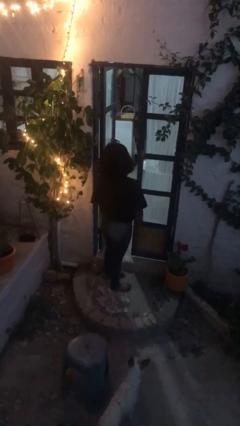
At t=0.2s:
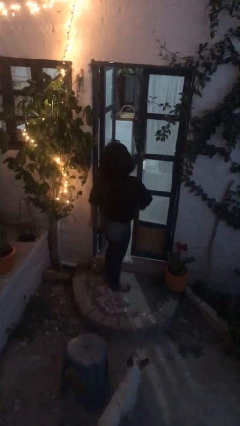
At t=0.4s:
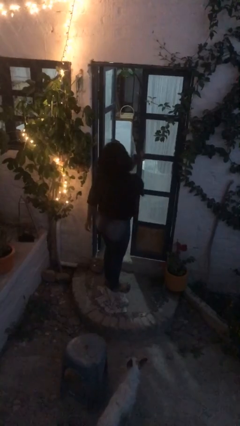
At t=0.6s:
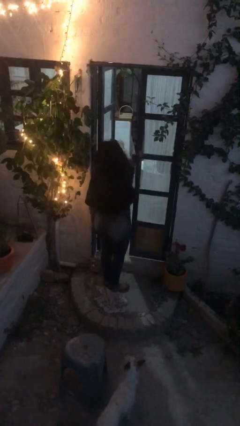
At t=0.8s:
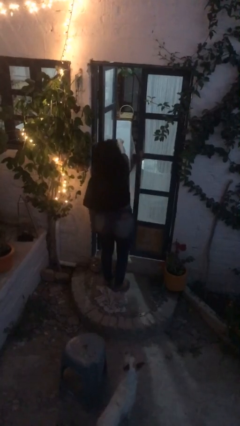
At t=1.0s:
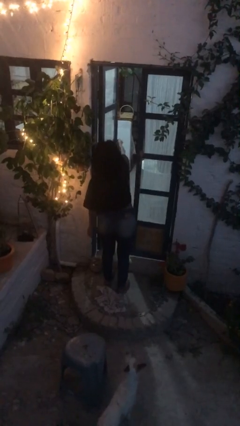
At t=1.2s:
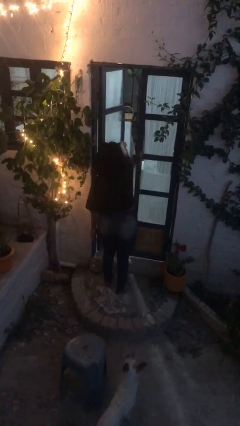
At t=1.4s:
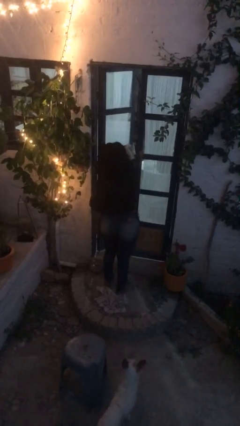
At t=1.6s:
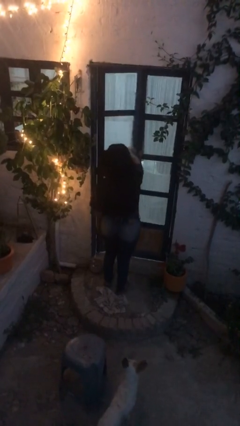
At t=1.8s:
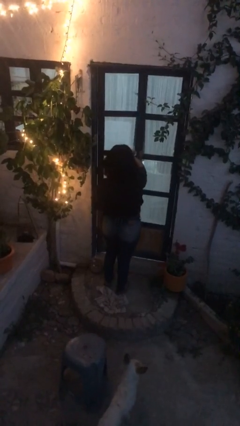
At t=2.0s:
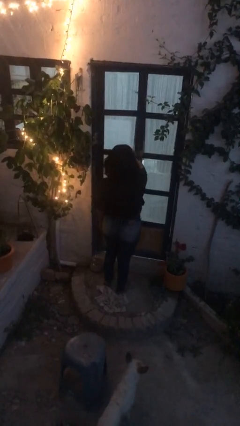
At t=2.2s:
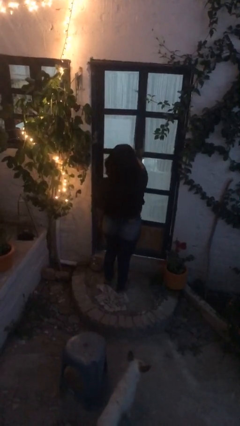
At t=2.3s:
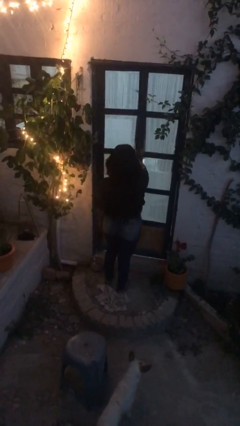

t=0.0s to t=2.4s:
person closes facility door

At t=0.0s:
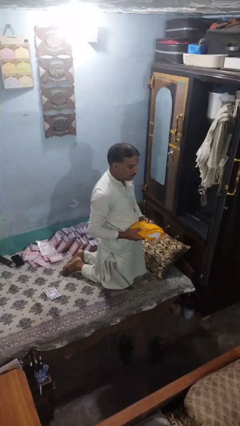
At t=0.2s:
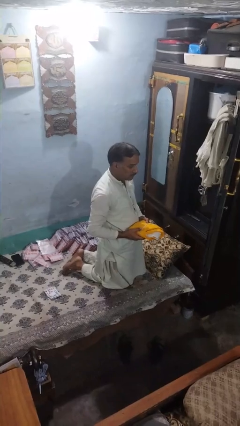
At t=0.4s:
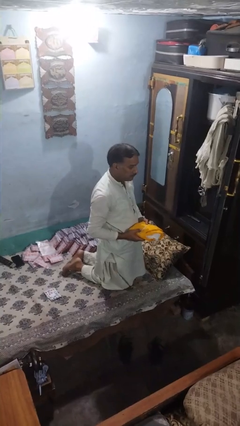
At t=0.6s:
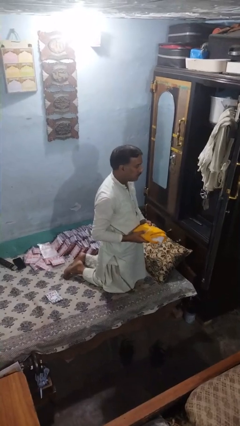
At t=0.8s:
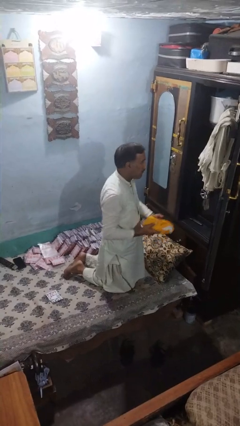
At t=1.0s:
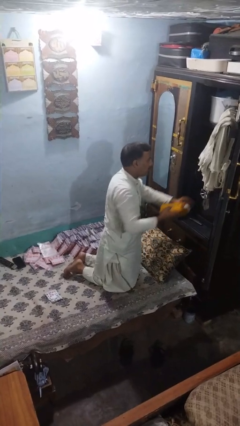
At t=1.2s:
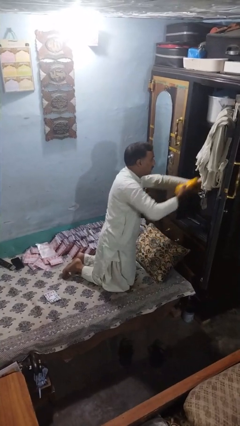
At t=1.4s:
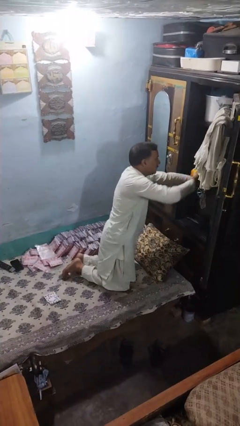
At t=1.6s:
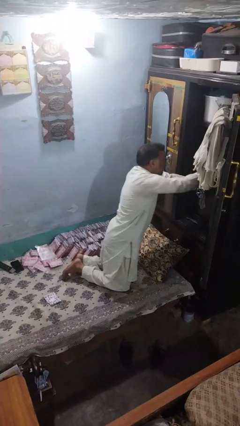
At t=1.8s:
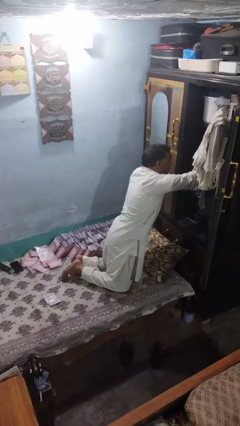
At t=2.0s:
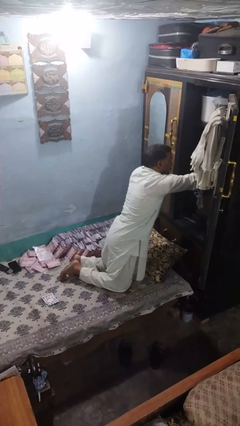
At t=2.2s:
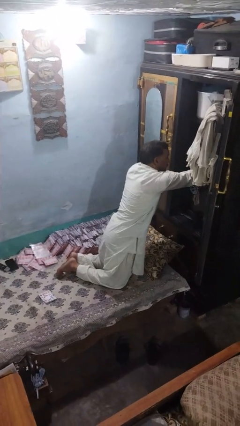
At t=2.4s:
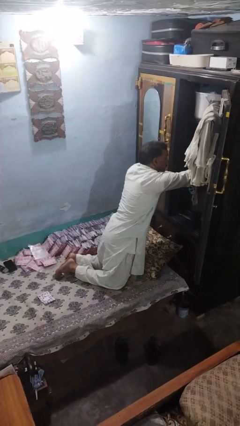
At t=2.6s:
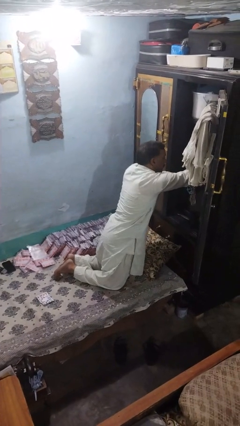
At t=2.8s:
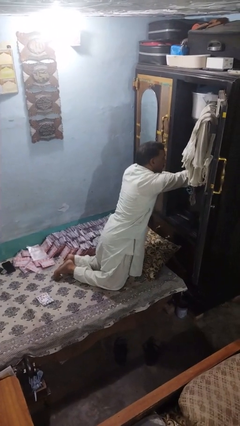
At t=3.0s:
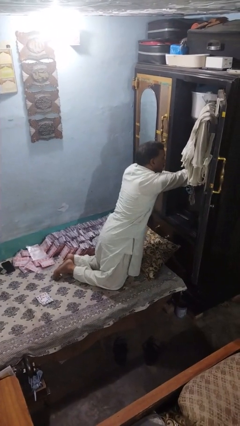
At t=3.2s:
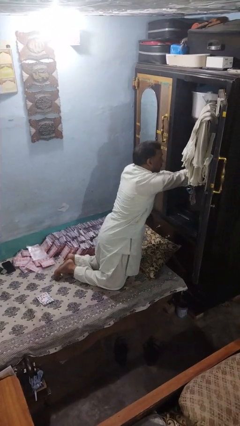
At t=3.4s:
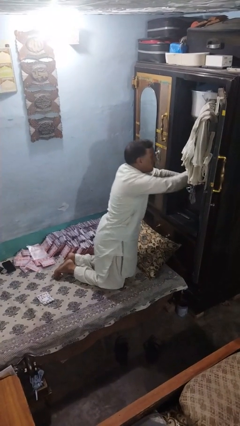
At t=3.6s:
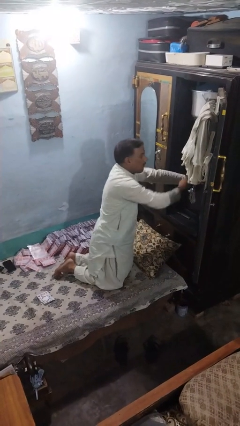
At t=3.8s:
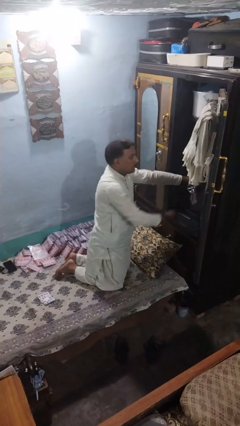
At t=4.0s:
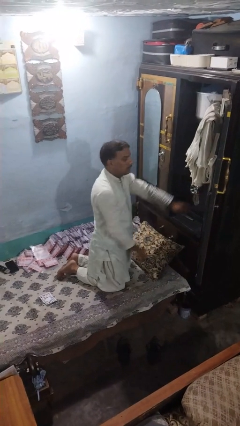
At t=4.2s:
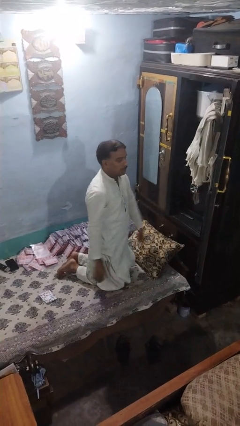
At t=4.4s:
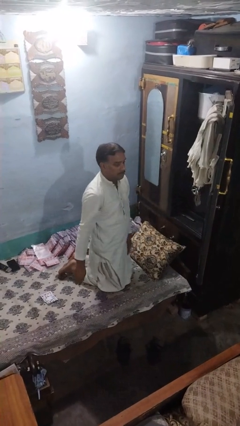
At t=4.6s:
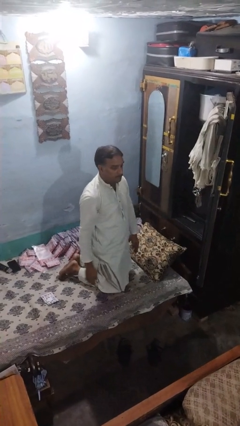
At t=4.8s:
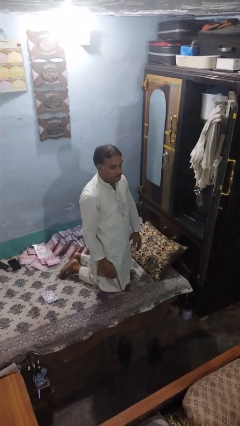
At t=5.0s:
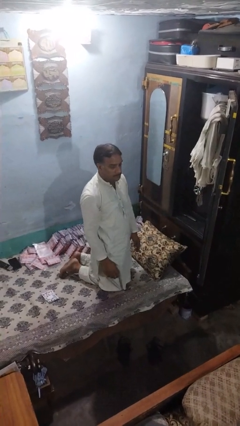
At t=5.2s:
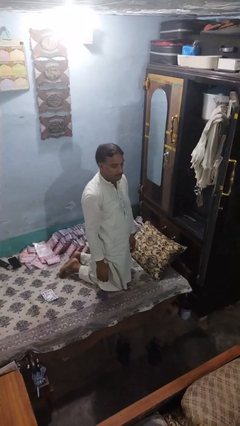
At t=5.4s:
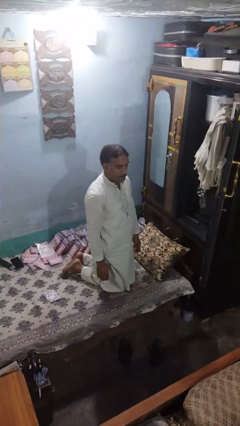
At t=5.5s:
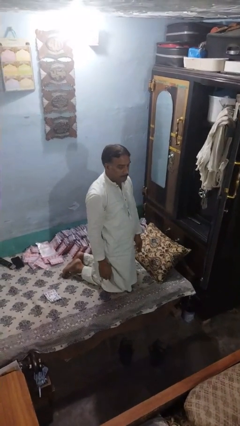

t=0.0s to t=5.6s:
person puts clothes into dresser

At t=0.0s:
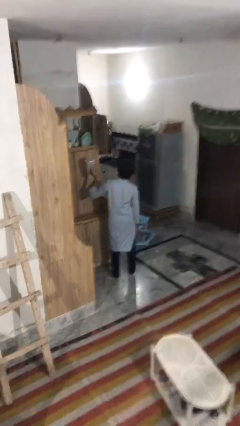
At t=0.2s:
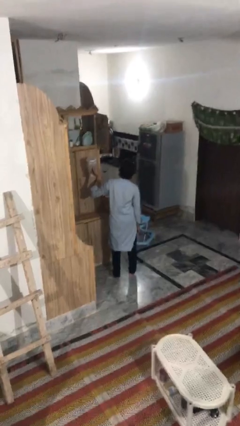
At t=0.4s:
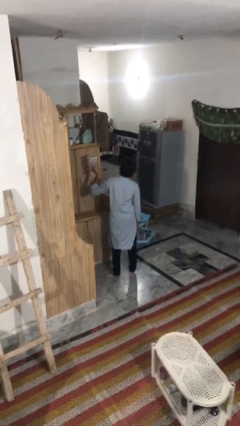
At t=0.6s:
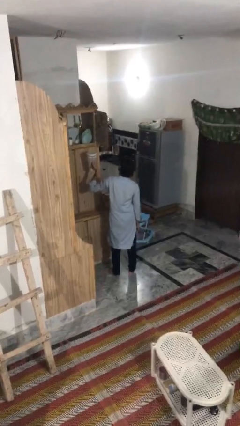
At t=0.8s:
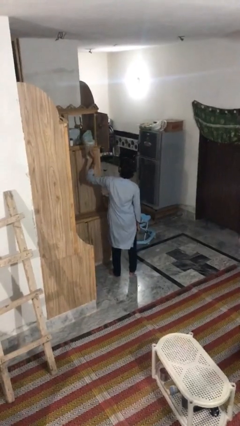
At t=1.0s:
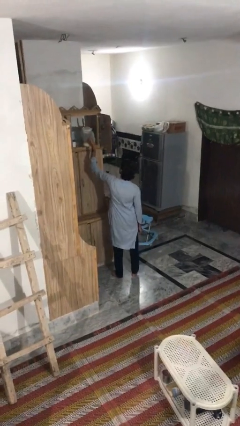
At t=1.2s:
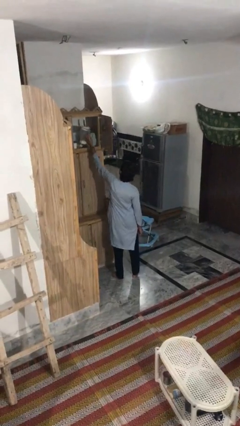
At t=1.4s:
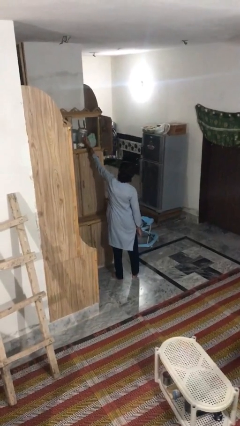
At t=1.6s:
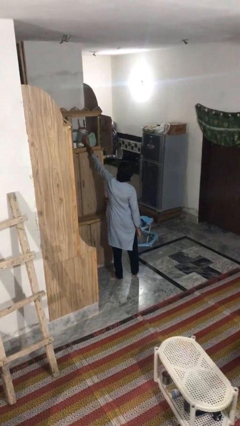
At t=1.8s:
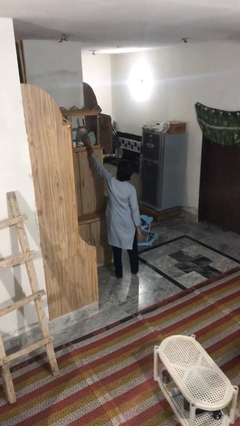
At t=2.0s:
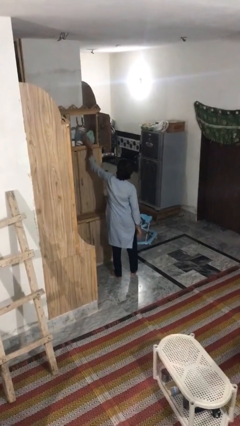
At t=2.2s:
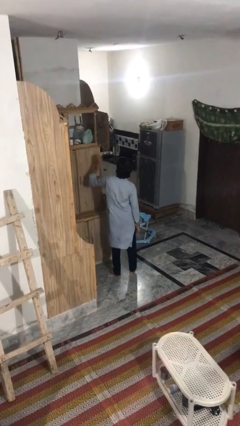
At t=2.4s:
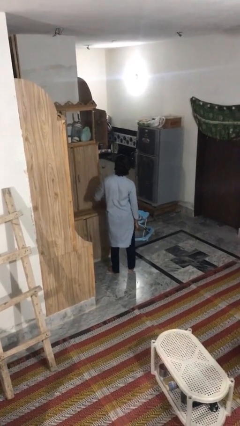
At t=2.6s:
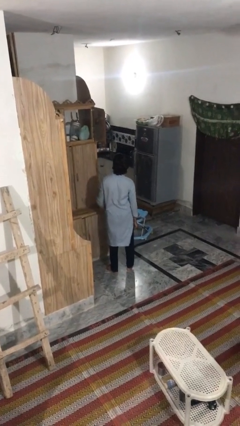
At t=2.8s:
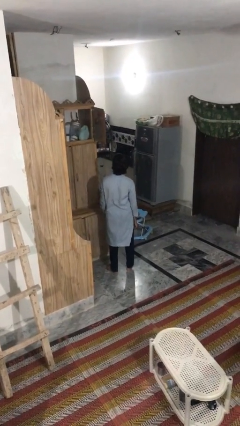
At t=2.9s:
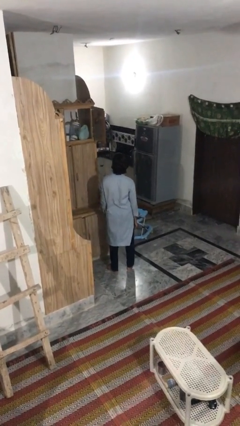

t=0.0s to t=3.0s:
person puts down object on shelf

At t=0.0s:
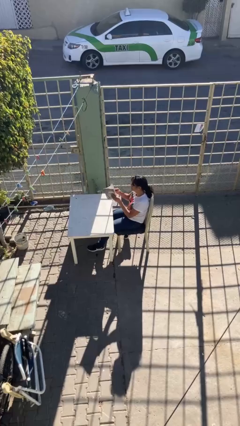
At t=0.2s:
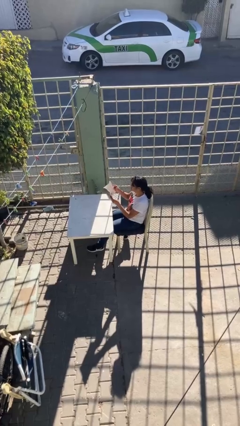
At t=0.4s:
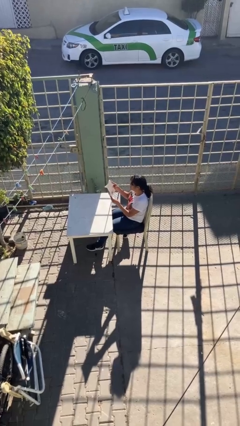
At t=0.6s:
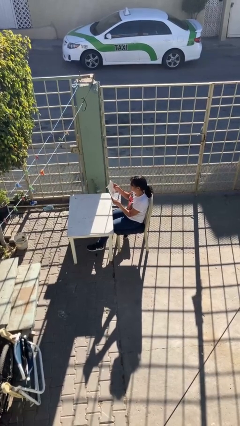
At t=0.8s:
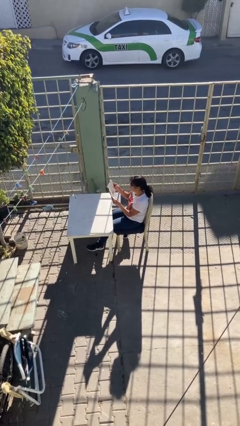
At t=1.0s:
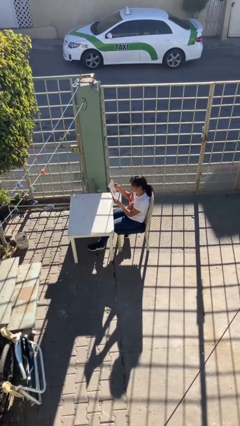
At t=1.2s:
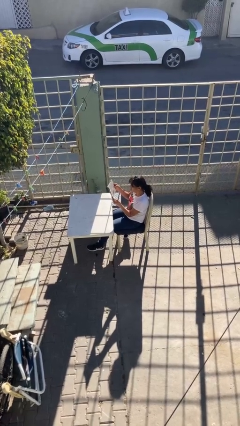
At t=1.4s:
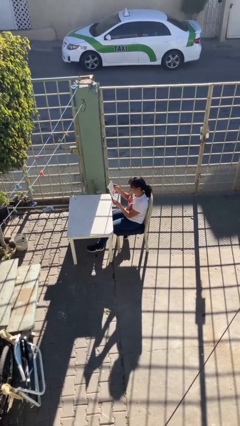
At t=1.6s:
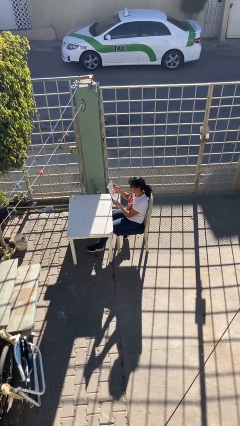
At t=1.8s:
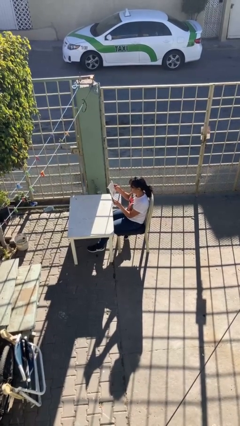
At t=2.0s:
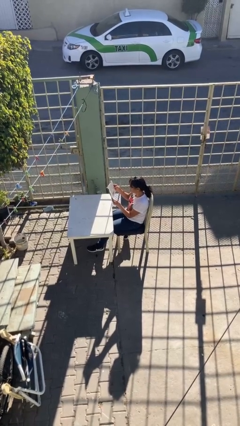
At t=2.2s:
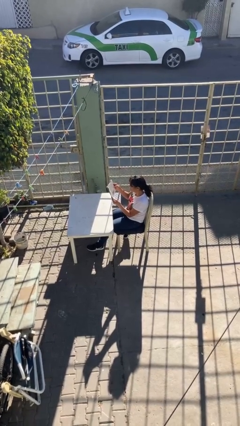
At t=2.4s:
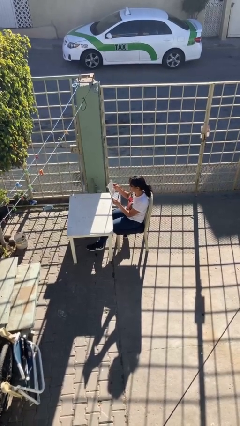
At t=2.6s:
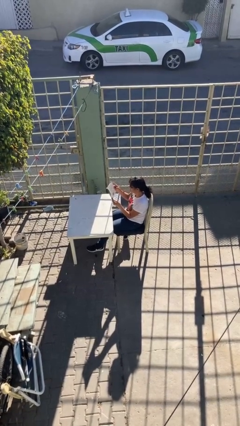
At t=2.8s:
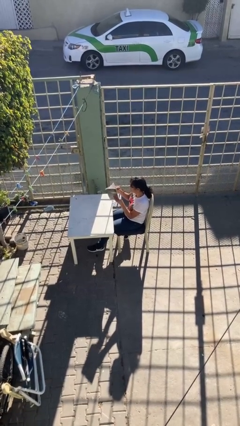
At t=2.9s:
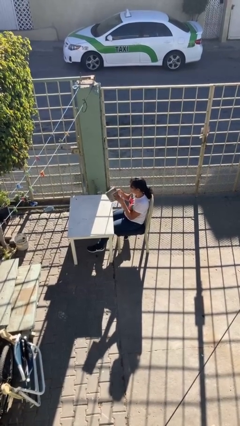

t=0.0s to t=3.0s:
person reads document

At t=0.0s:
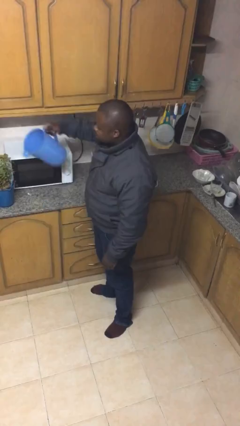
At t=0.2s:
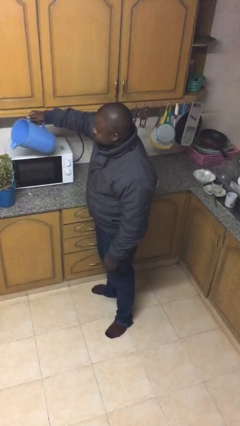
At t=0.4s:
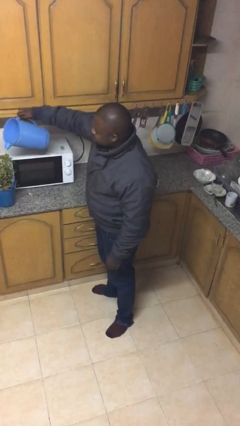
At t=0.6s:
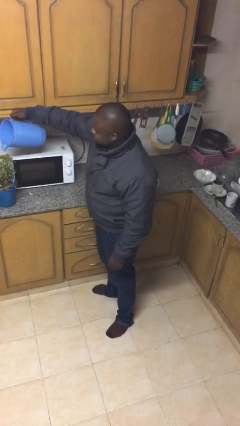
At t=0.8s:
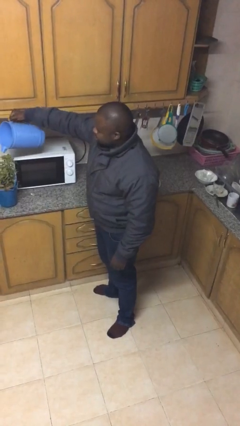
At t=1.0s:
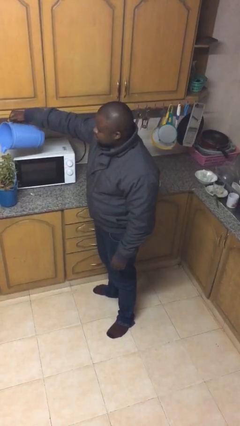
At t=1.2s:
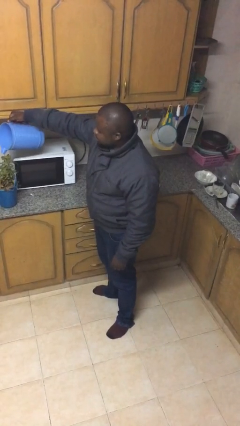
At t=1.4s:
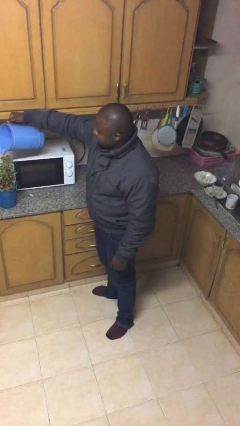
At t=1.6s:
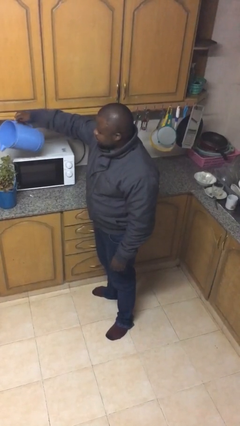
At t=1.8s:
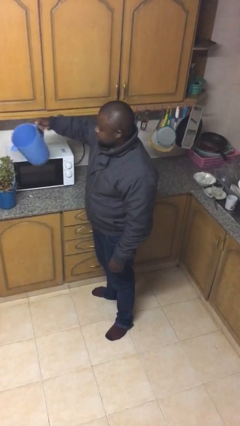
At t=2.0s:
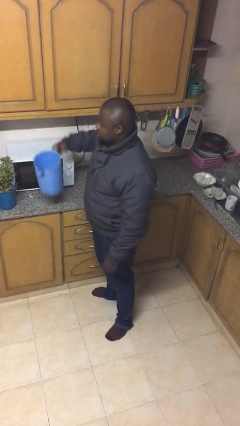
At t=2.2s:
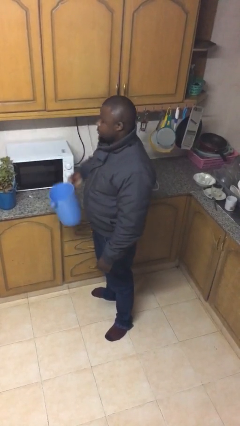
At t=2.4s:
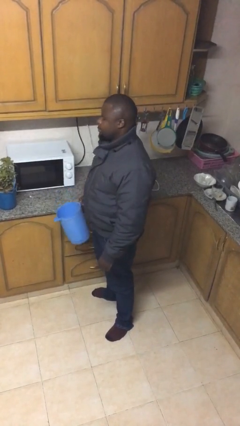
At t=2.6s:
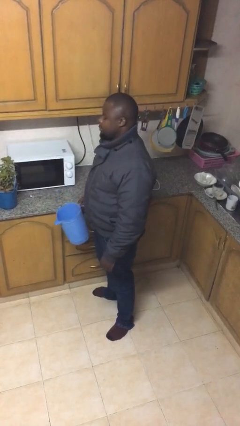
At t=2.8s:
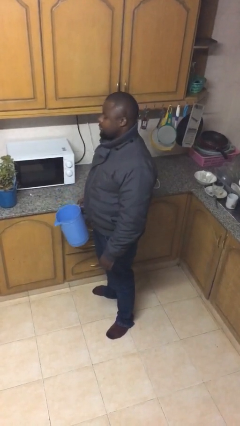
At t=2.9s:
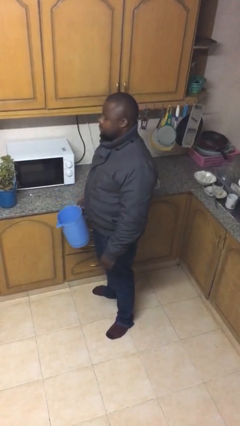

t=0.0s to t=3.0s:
person waters houseplant

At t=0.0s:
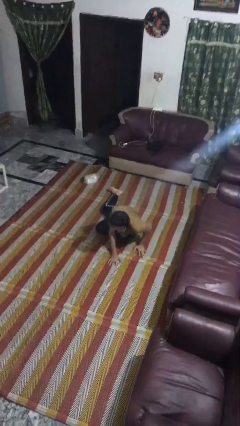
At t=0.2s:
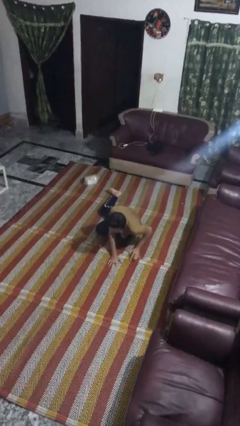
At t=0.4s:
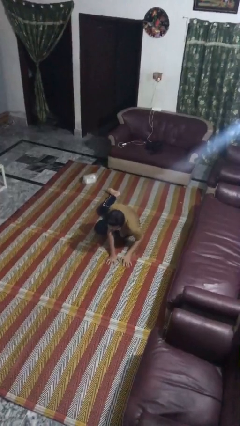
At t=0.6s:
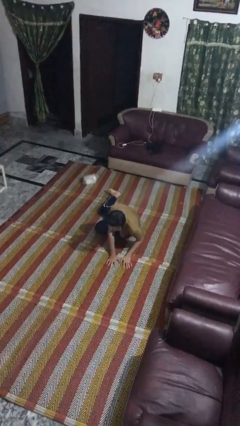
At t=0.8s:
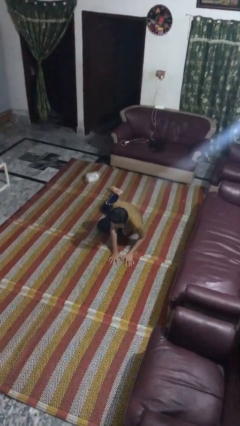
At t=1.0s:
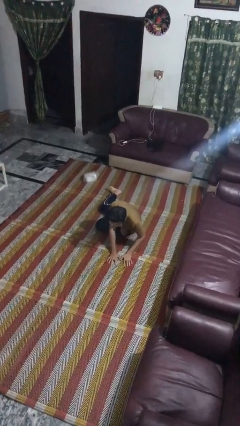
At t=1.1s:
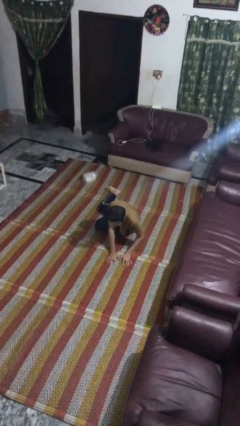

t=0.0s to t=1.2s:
person lies down on floor
